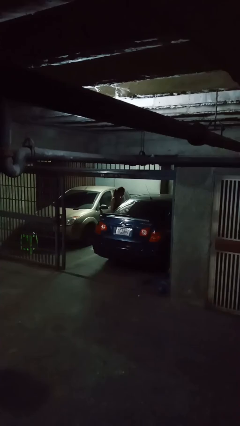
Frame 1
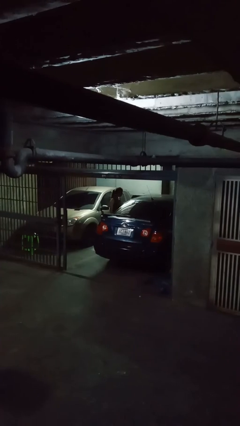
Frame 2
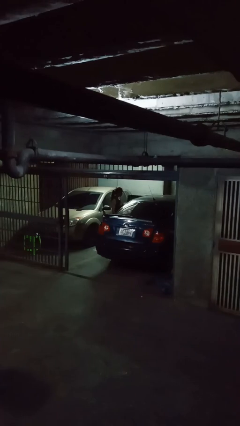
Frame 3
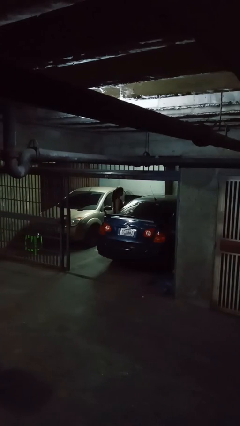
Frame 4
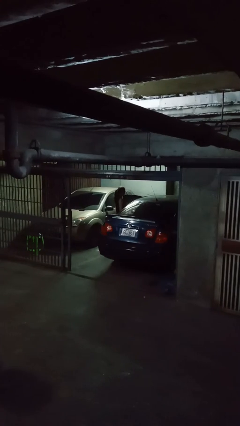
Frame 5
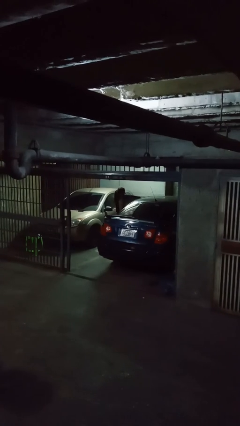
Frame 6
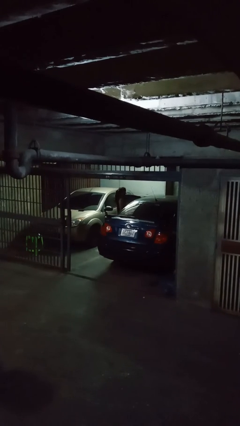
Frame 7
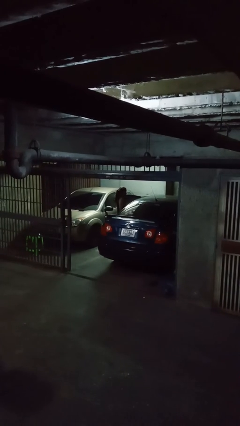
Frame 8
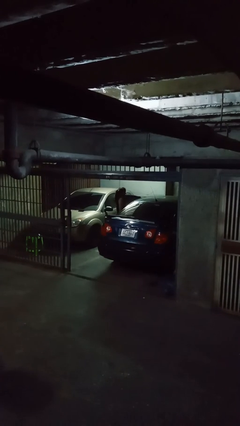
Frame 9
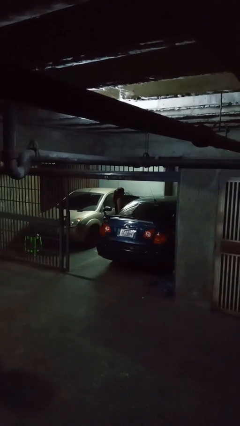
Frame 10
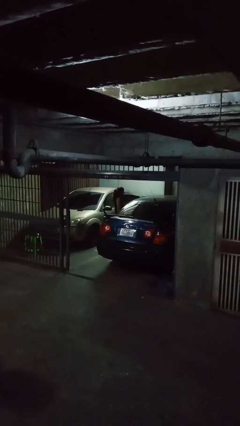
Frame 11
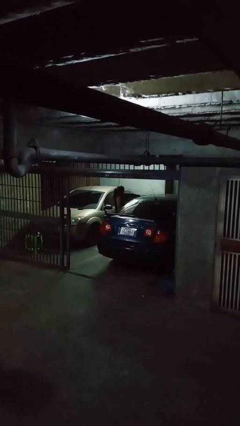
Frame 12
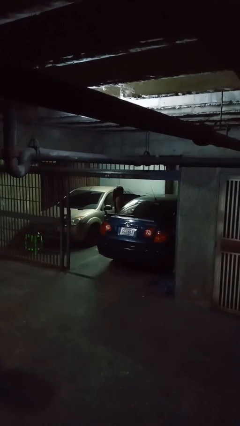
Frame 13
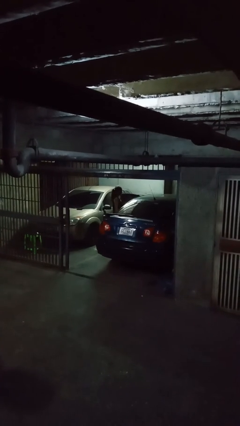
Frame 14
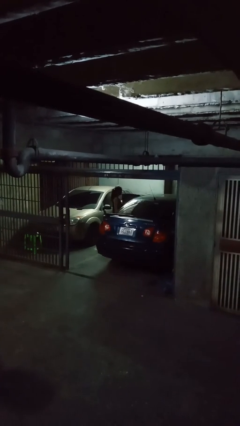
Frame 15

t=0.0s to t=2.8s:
person opens car door

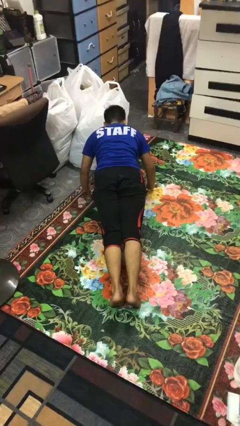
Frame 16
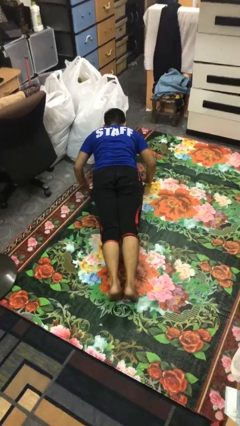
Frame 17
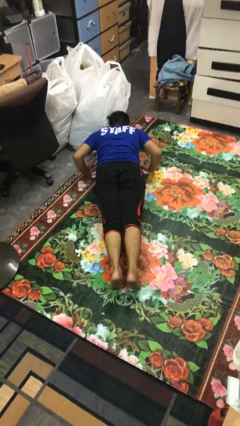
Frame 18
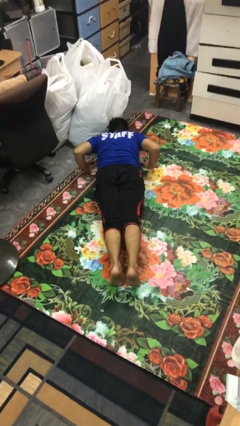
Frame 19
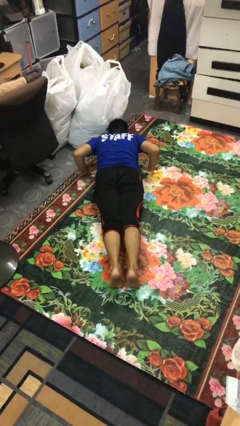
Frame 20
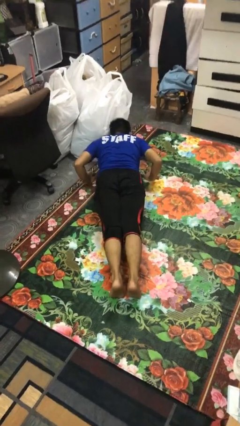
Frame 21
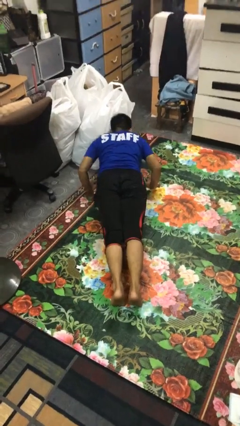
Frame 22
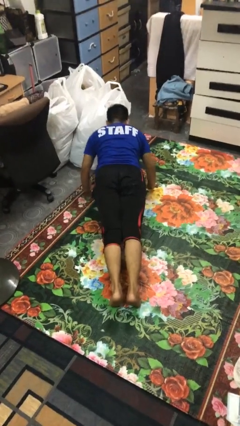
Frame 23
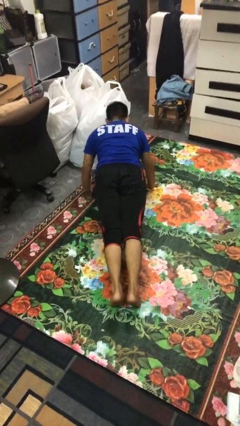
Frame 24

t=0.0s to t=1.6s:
person exercises with pushup

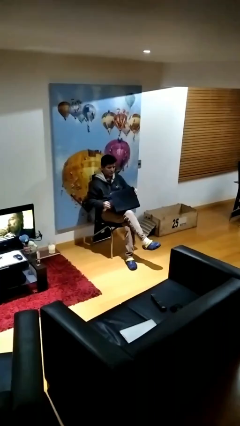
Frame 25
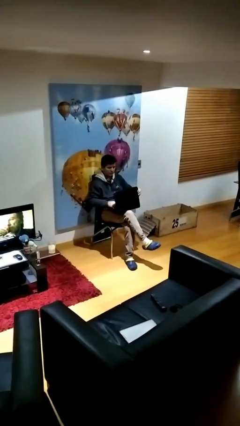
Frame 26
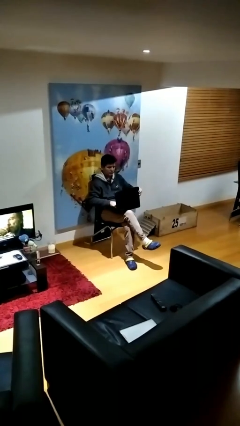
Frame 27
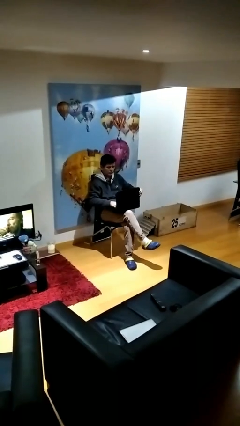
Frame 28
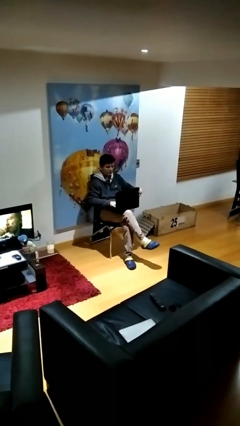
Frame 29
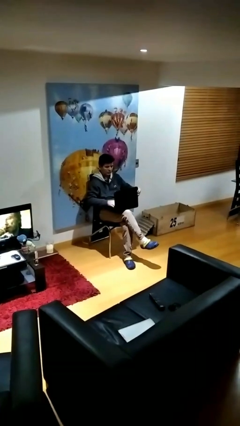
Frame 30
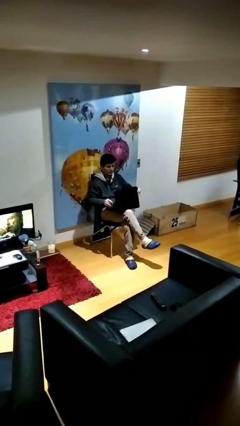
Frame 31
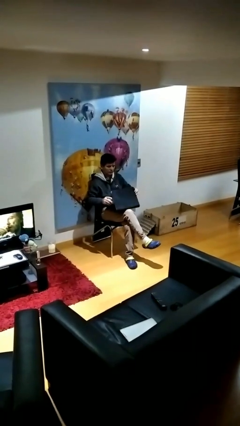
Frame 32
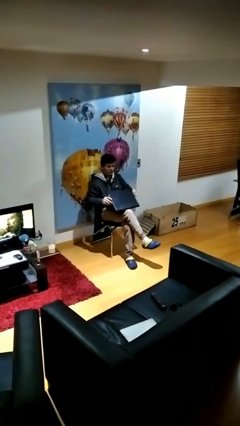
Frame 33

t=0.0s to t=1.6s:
person interacts with laptop

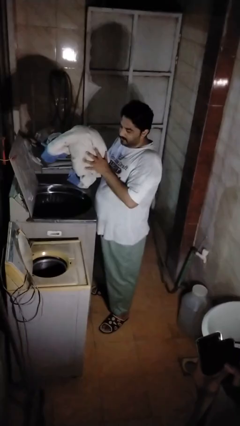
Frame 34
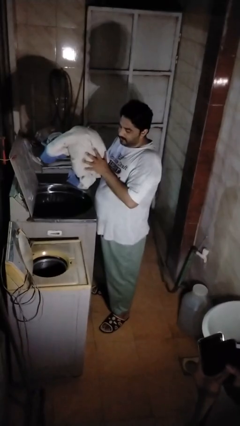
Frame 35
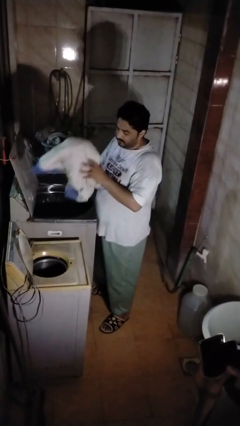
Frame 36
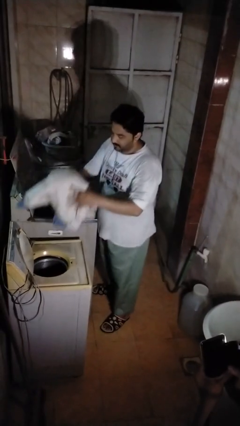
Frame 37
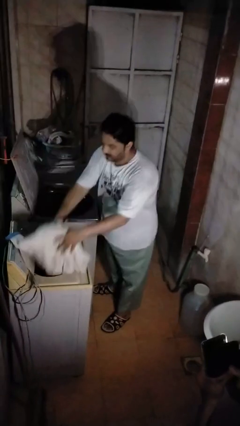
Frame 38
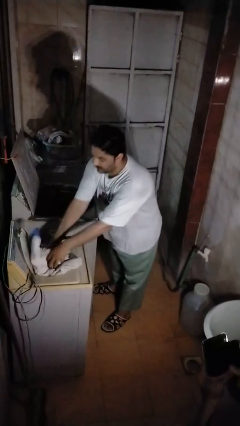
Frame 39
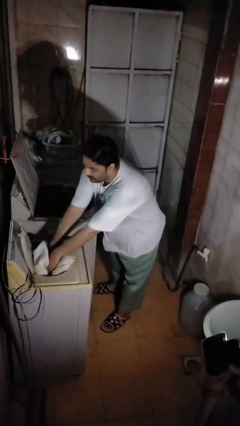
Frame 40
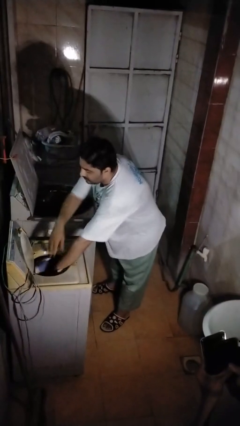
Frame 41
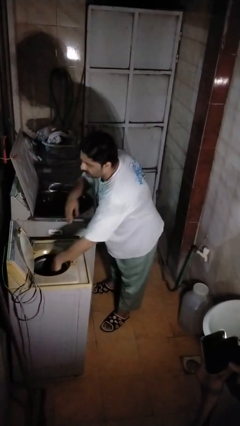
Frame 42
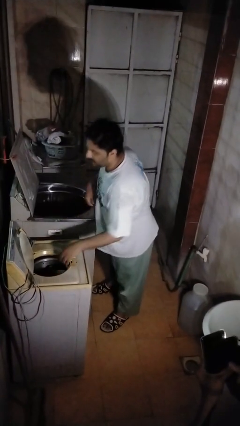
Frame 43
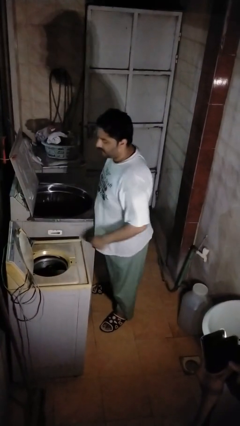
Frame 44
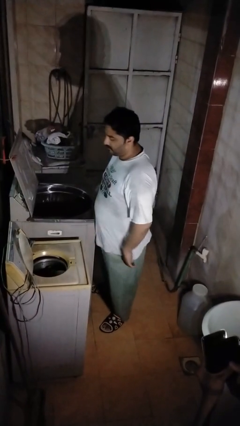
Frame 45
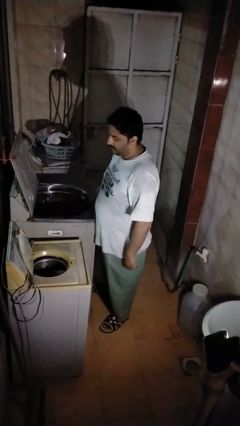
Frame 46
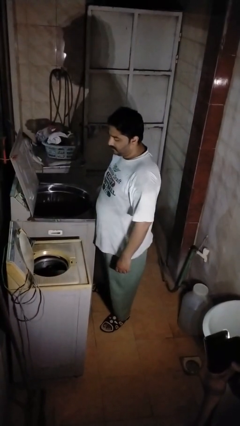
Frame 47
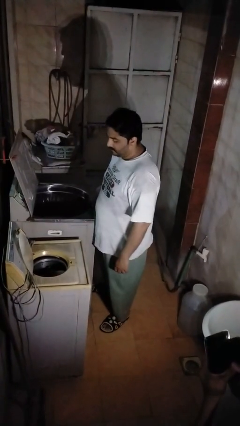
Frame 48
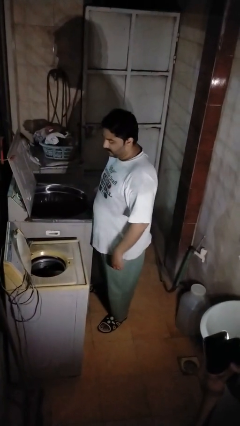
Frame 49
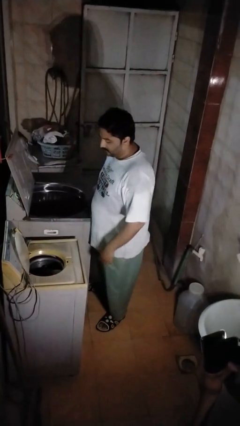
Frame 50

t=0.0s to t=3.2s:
person loads dryer

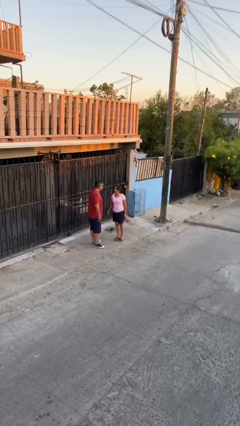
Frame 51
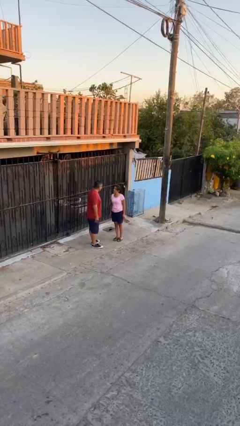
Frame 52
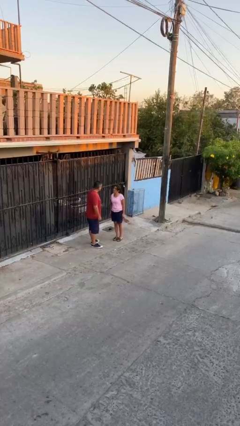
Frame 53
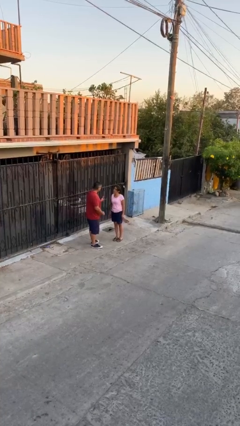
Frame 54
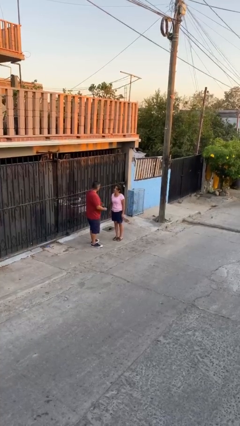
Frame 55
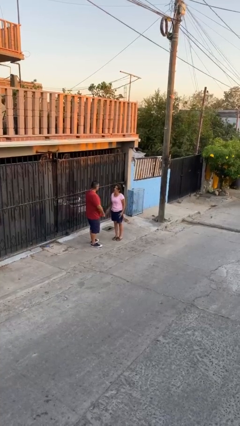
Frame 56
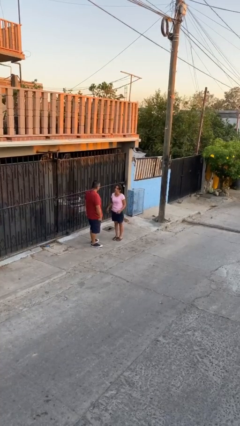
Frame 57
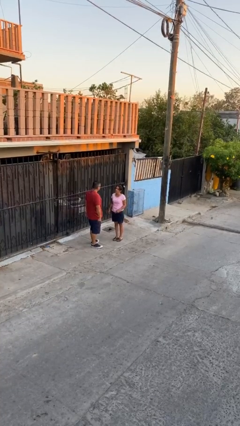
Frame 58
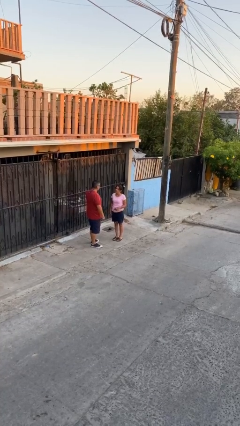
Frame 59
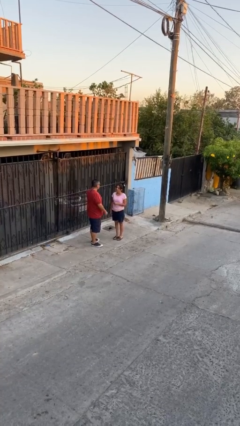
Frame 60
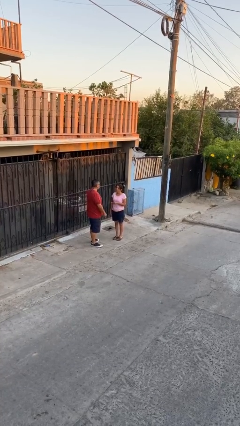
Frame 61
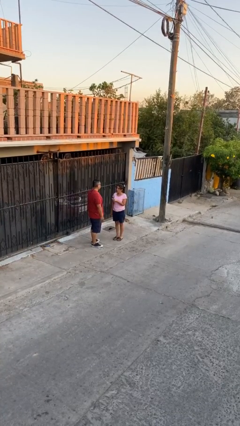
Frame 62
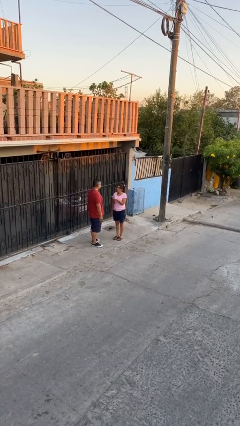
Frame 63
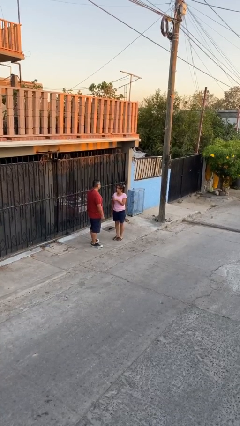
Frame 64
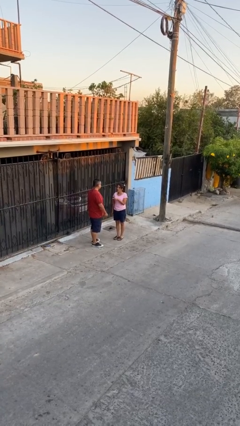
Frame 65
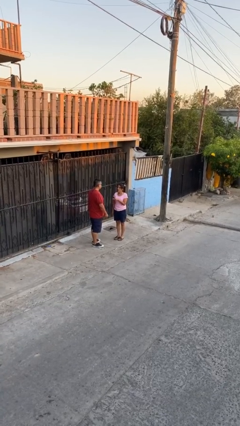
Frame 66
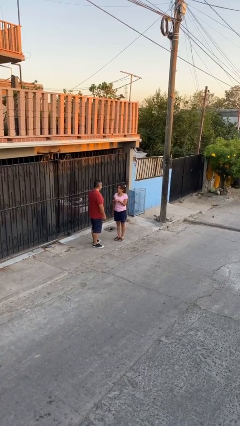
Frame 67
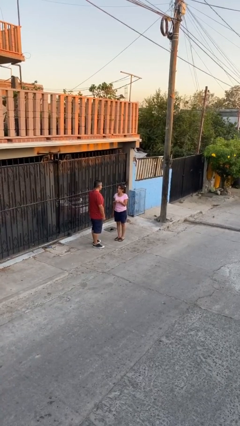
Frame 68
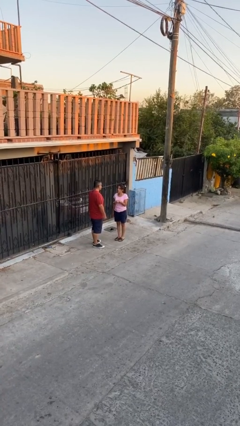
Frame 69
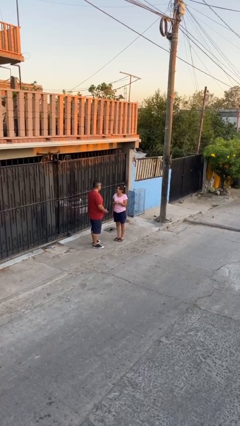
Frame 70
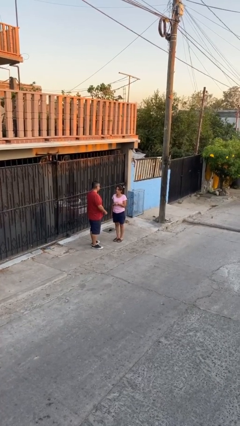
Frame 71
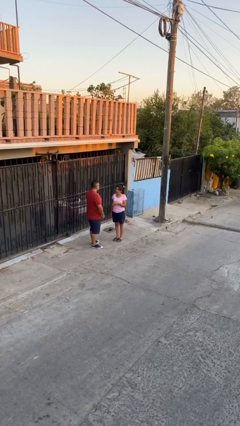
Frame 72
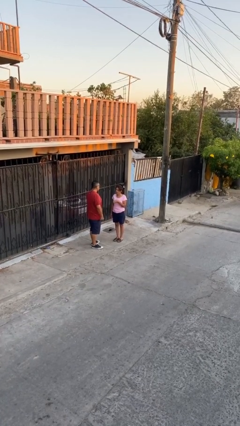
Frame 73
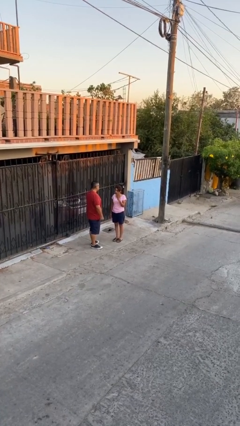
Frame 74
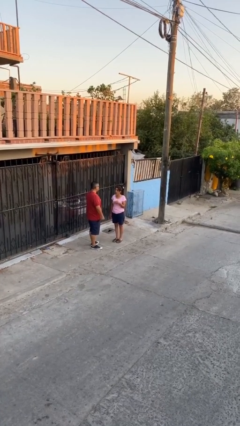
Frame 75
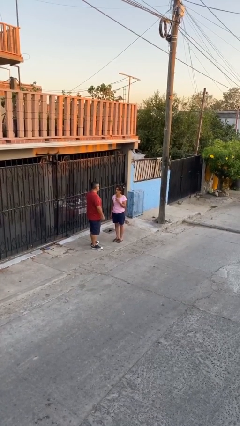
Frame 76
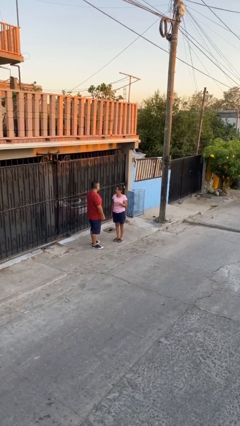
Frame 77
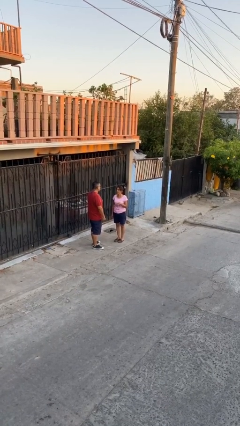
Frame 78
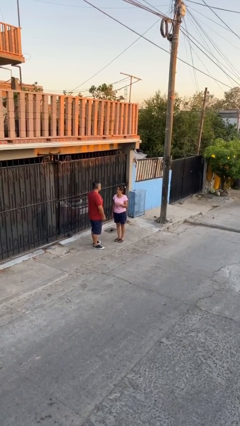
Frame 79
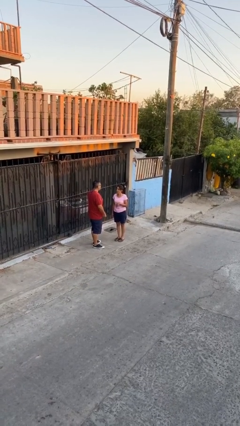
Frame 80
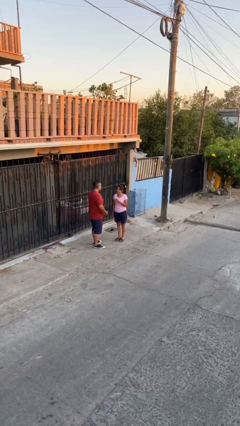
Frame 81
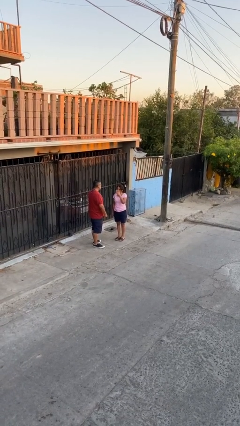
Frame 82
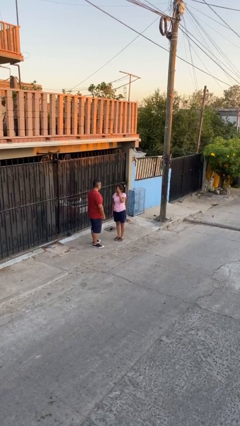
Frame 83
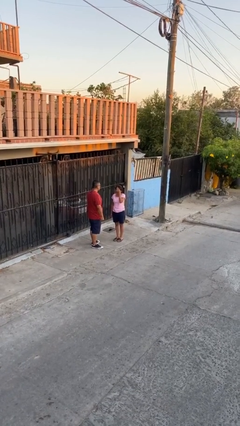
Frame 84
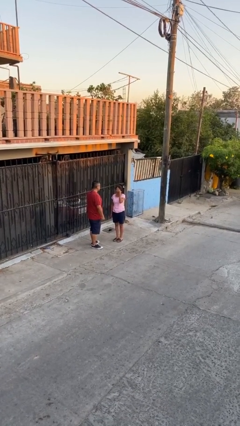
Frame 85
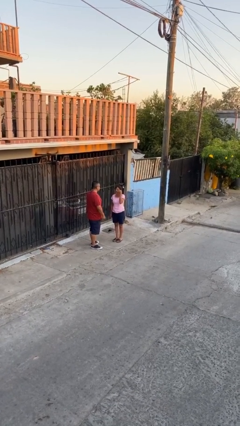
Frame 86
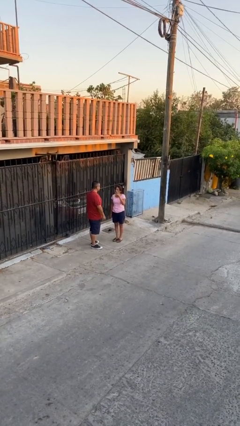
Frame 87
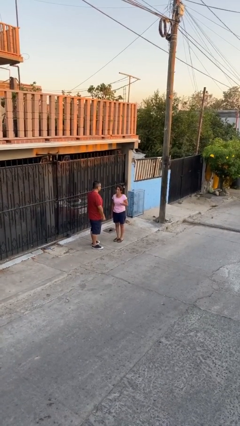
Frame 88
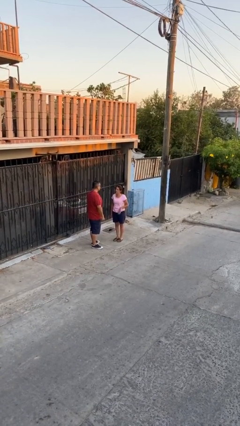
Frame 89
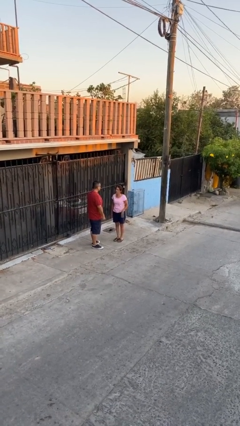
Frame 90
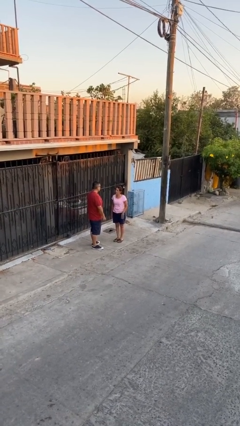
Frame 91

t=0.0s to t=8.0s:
person talks to person

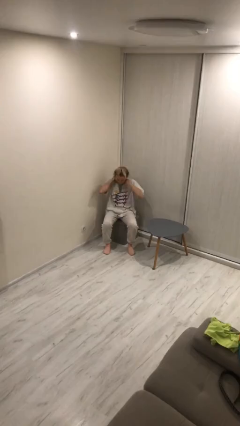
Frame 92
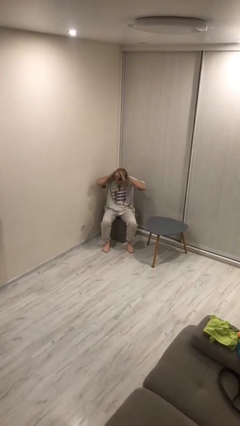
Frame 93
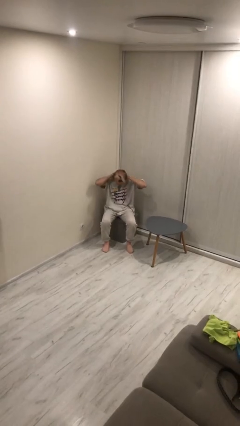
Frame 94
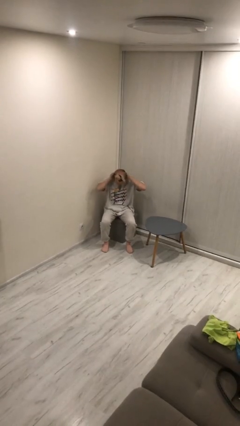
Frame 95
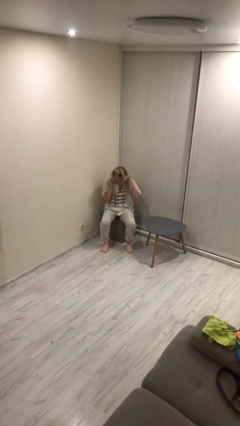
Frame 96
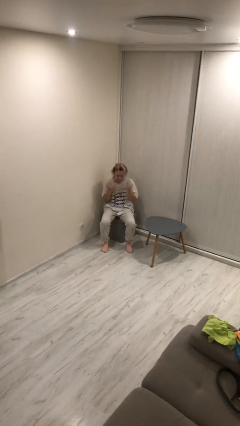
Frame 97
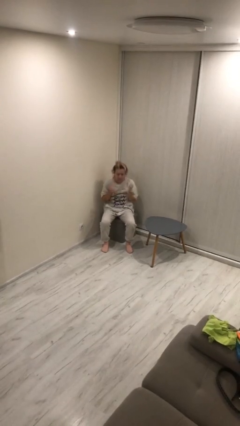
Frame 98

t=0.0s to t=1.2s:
person takes off necklace
